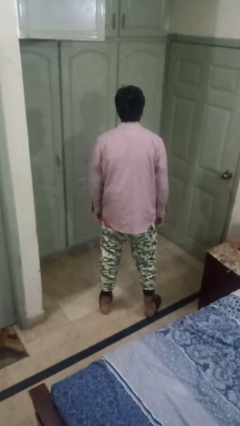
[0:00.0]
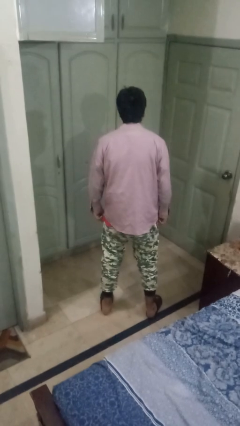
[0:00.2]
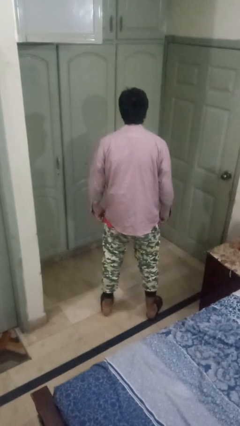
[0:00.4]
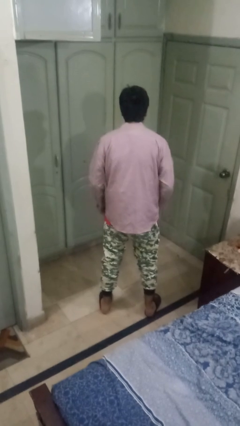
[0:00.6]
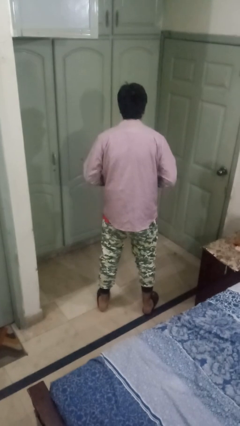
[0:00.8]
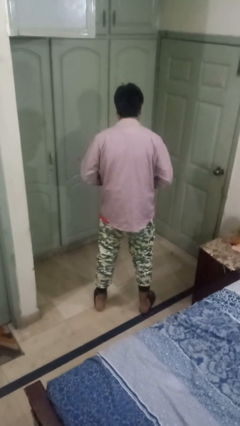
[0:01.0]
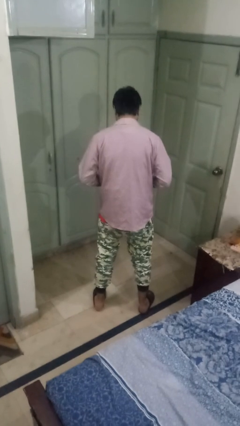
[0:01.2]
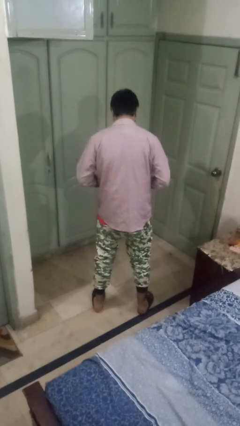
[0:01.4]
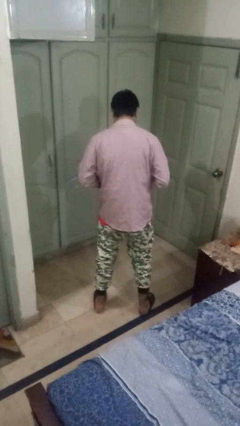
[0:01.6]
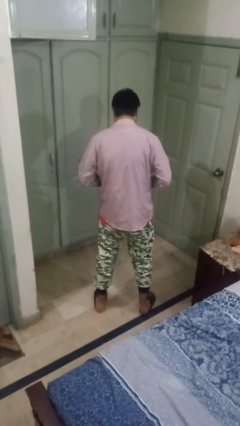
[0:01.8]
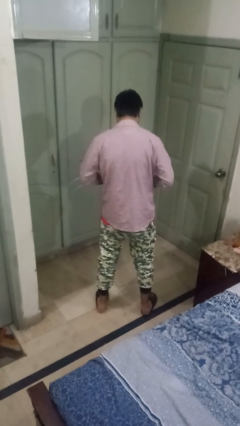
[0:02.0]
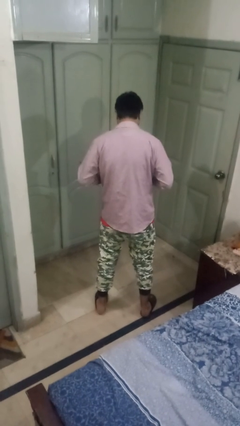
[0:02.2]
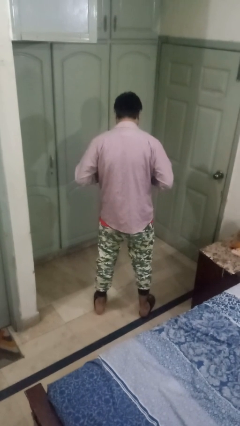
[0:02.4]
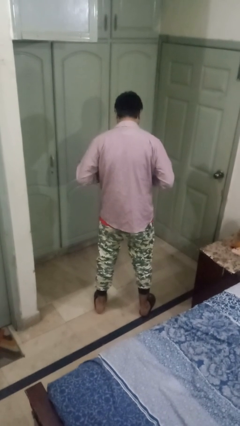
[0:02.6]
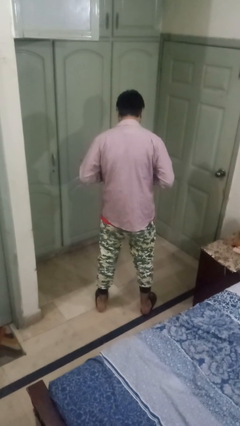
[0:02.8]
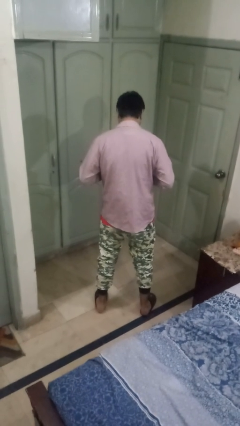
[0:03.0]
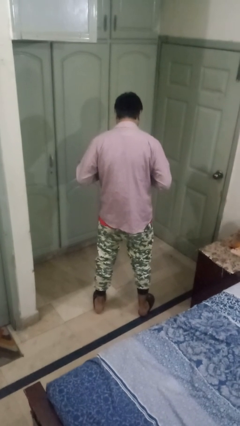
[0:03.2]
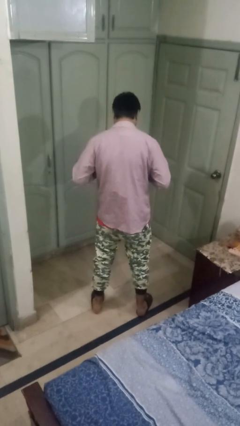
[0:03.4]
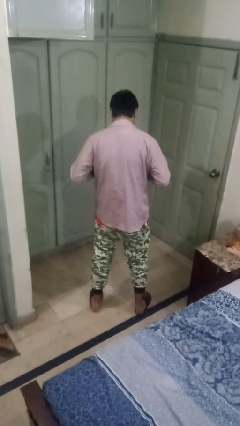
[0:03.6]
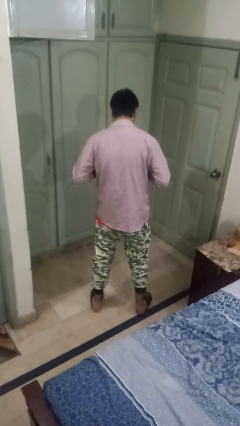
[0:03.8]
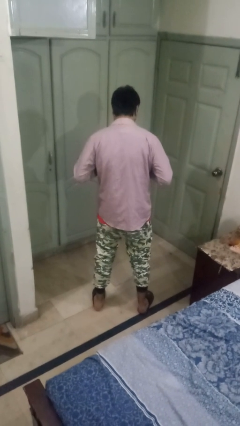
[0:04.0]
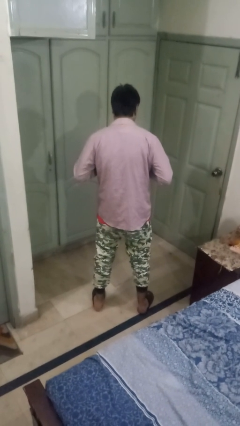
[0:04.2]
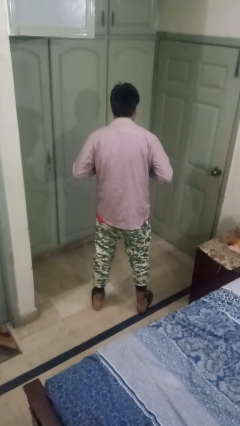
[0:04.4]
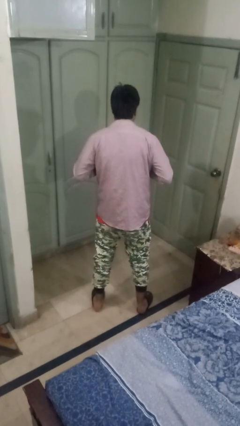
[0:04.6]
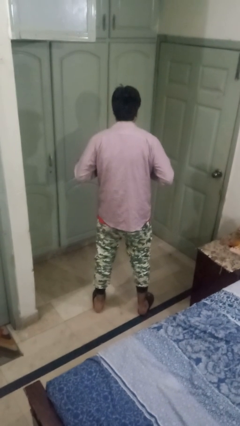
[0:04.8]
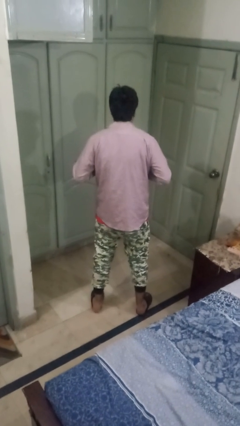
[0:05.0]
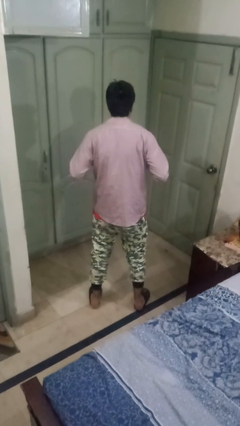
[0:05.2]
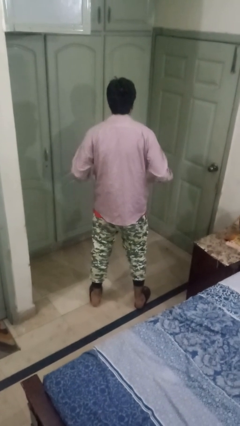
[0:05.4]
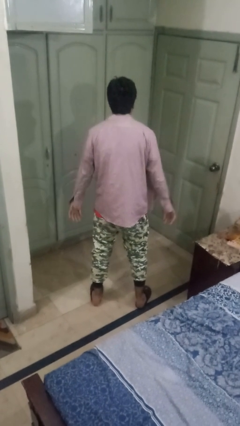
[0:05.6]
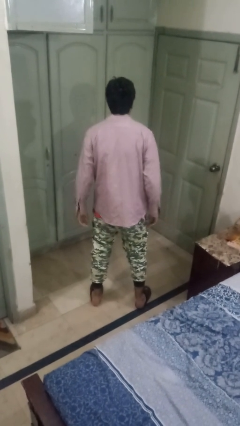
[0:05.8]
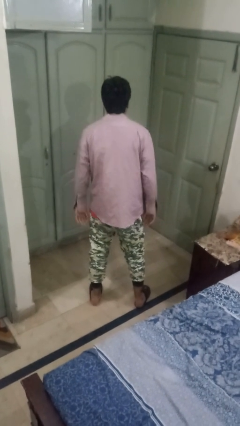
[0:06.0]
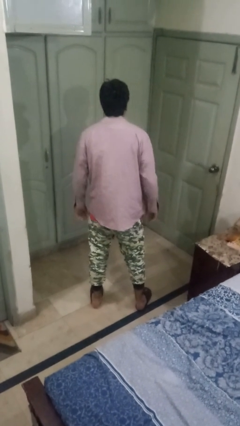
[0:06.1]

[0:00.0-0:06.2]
person unbuttons shirt

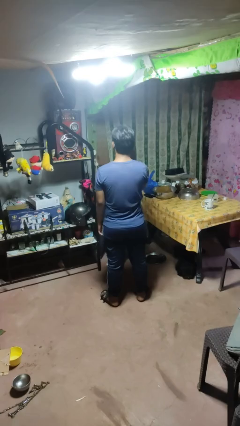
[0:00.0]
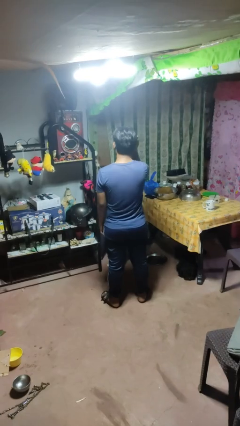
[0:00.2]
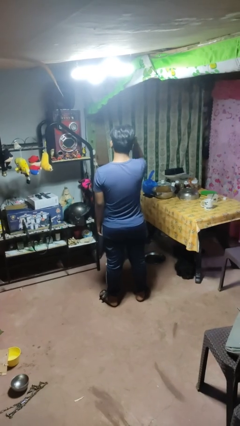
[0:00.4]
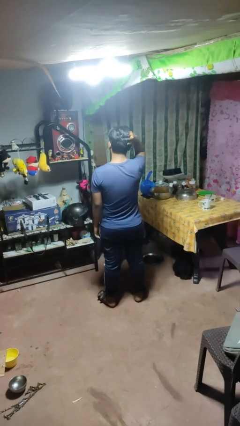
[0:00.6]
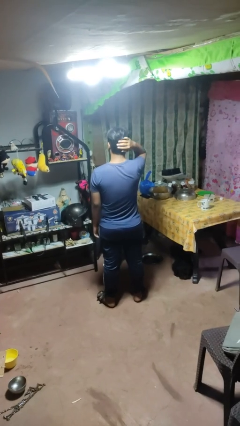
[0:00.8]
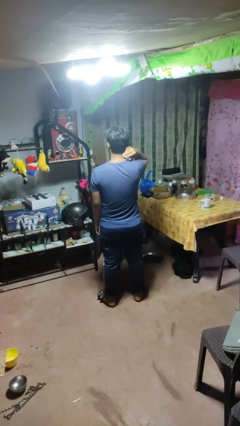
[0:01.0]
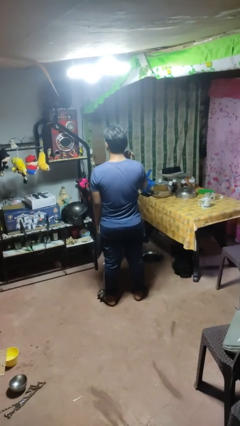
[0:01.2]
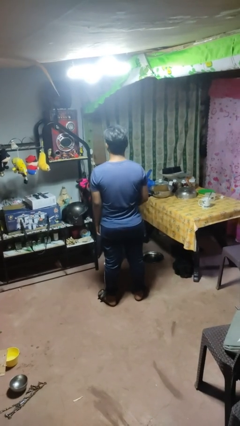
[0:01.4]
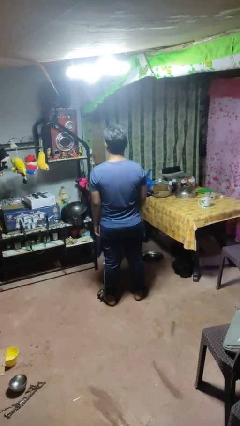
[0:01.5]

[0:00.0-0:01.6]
person strokes hair

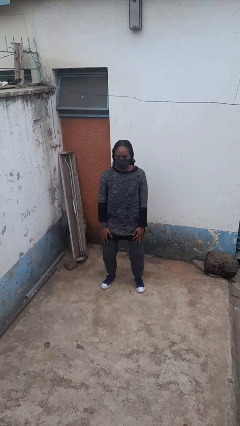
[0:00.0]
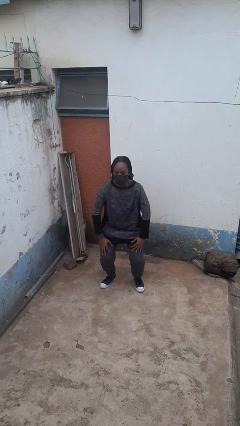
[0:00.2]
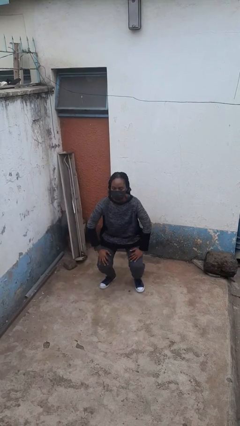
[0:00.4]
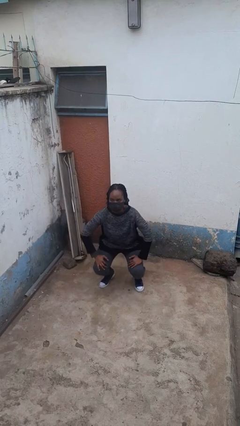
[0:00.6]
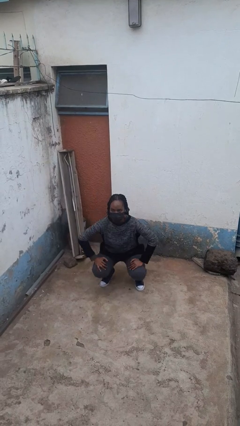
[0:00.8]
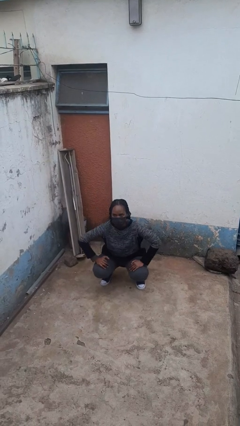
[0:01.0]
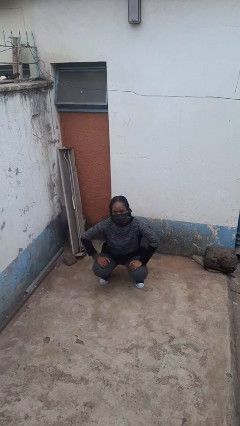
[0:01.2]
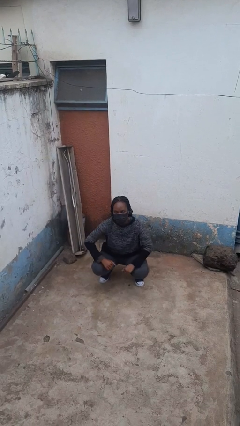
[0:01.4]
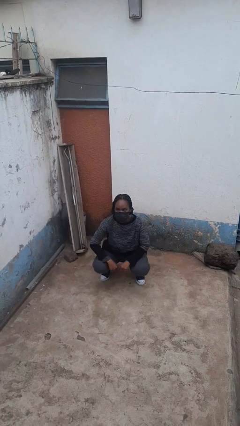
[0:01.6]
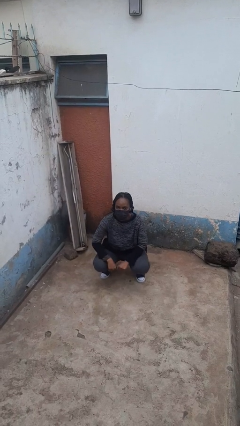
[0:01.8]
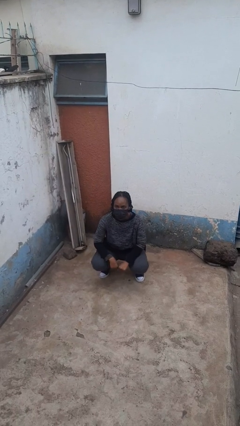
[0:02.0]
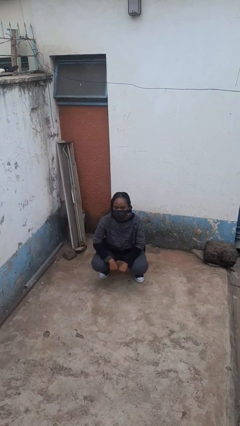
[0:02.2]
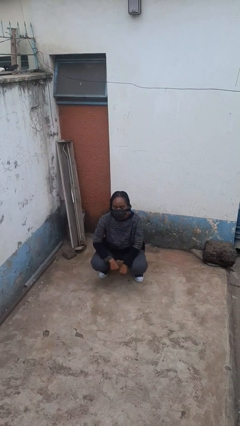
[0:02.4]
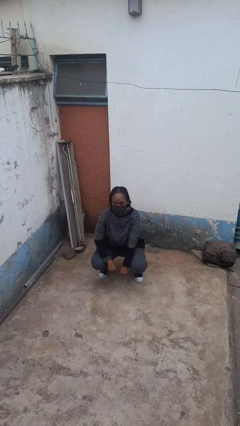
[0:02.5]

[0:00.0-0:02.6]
person squats

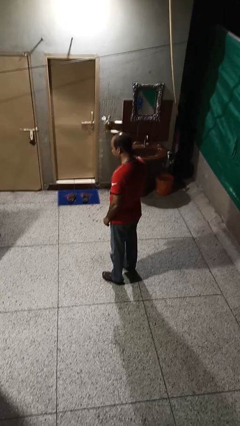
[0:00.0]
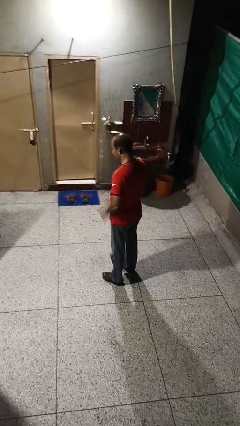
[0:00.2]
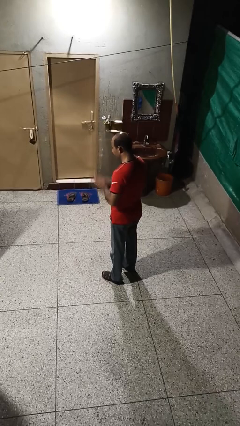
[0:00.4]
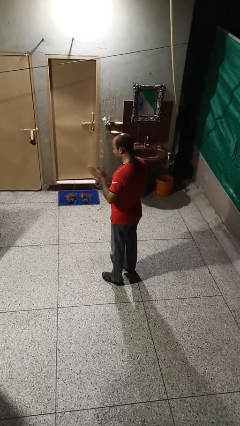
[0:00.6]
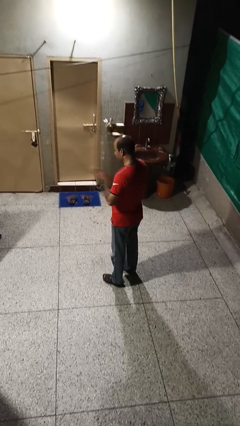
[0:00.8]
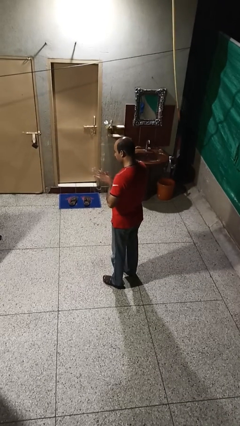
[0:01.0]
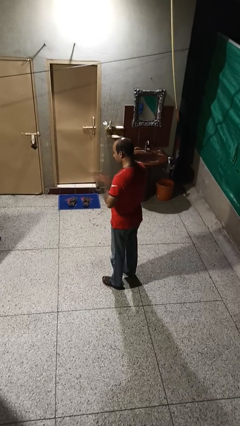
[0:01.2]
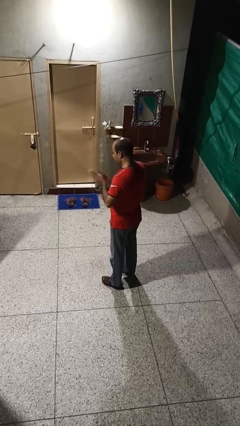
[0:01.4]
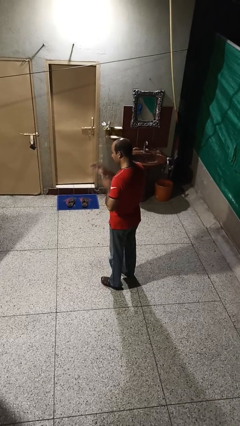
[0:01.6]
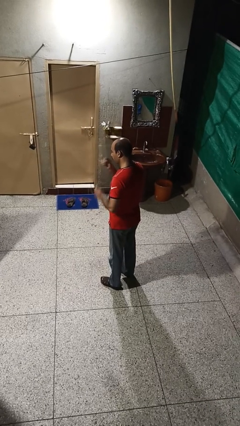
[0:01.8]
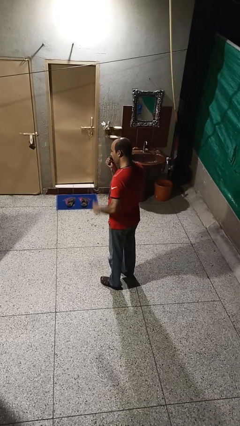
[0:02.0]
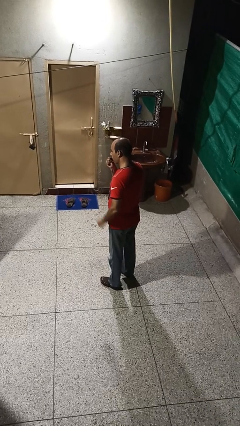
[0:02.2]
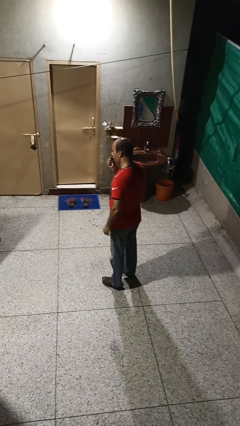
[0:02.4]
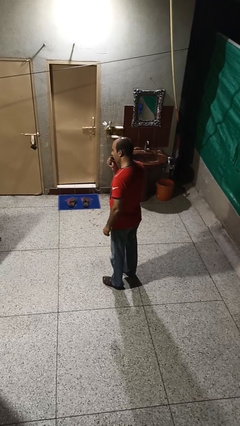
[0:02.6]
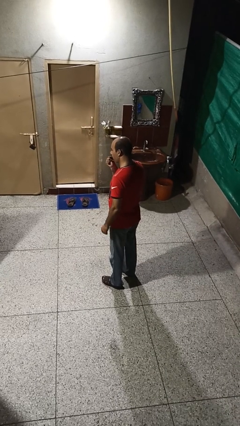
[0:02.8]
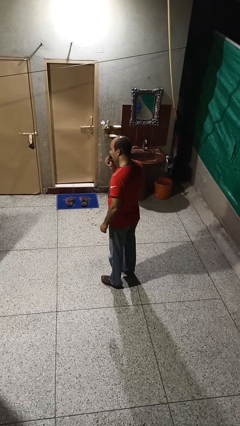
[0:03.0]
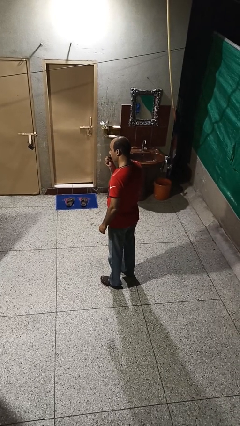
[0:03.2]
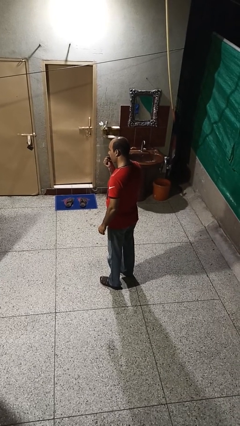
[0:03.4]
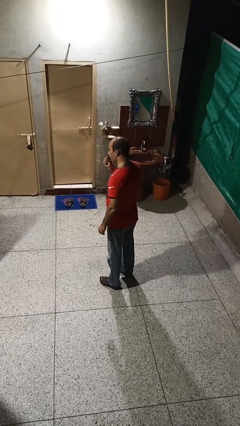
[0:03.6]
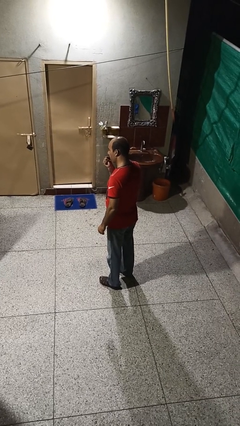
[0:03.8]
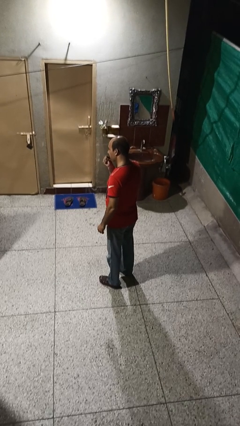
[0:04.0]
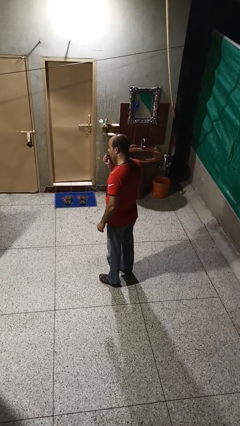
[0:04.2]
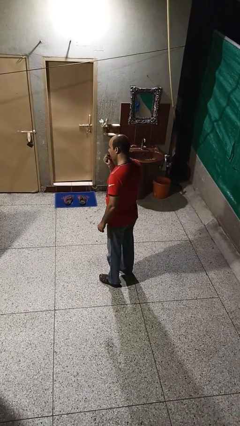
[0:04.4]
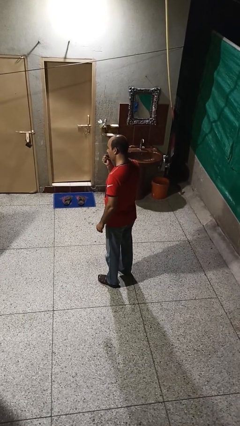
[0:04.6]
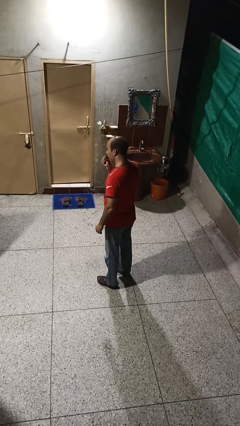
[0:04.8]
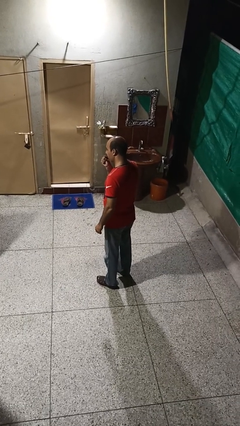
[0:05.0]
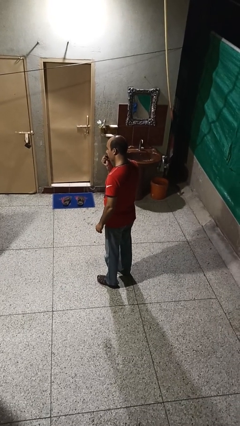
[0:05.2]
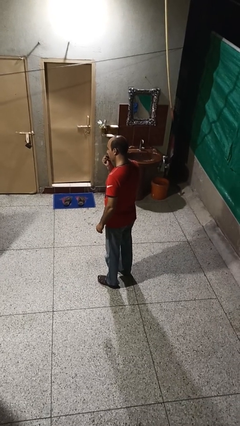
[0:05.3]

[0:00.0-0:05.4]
person blows into hands

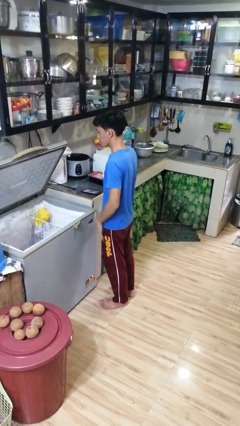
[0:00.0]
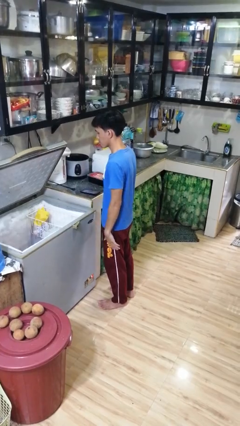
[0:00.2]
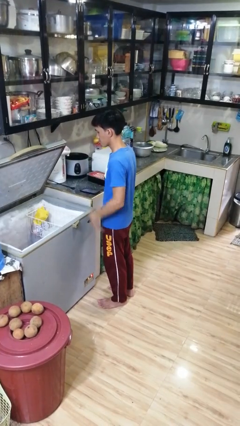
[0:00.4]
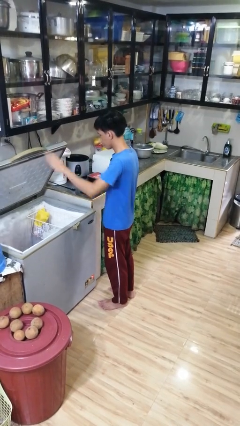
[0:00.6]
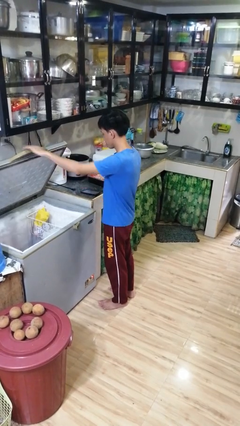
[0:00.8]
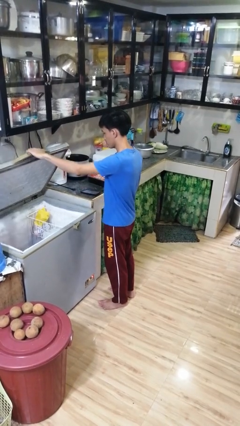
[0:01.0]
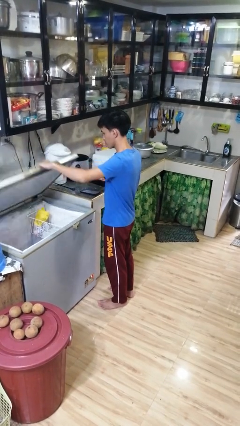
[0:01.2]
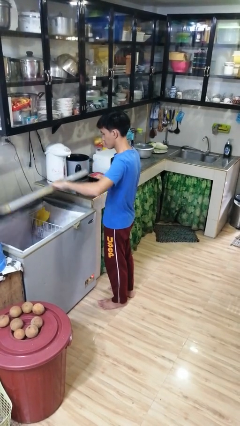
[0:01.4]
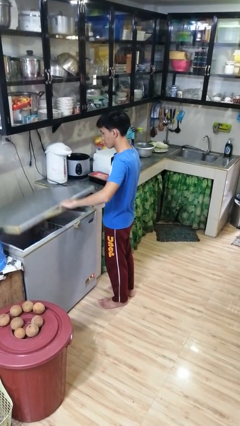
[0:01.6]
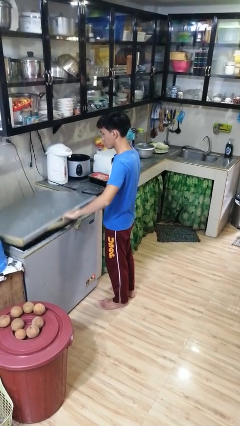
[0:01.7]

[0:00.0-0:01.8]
person closes refrigerator
